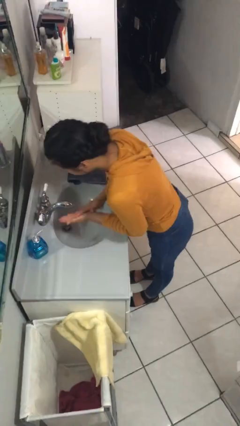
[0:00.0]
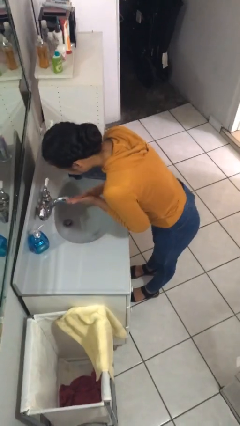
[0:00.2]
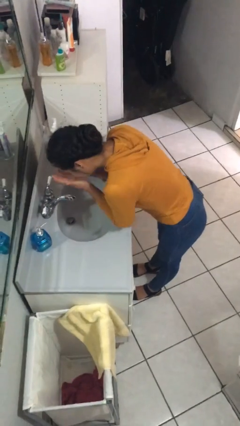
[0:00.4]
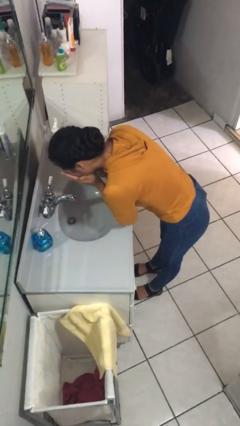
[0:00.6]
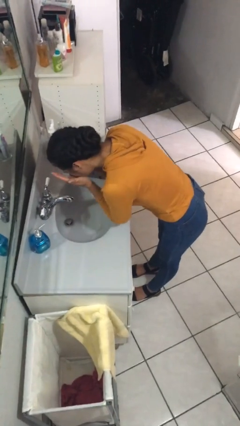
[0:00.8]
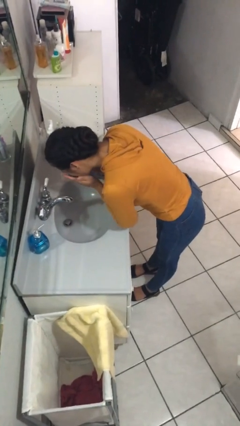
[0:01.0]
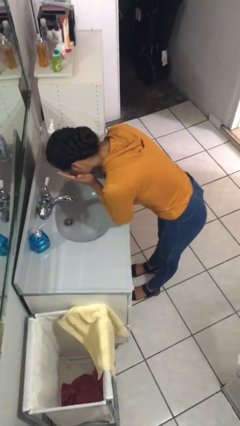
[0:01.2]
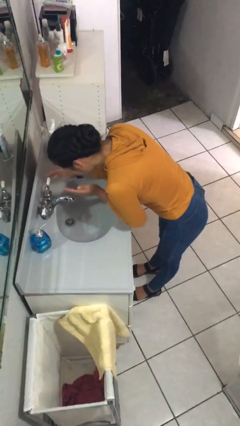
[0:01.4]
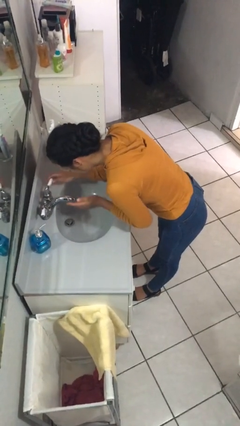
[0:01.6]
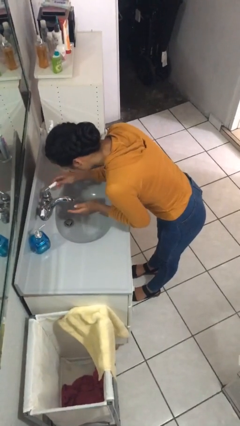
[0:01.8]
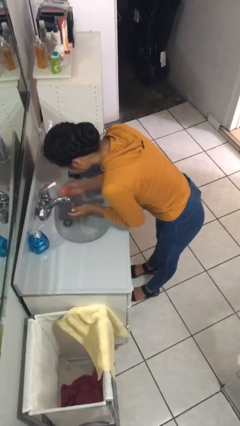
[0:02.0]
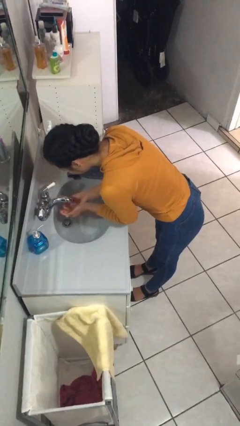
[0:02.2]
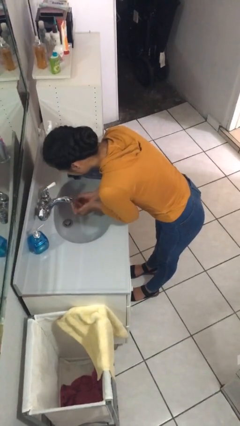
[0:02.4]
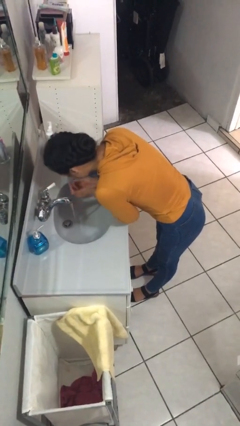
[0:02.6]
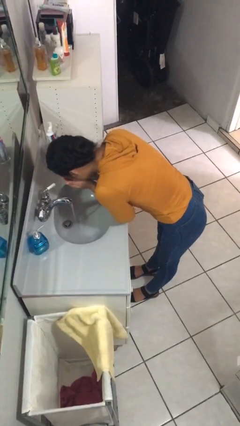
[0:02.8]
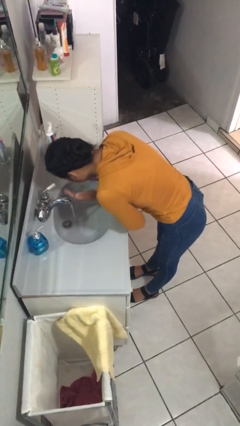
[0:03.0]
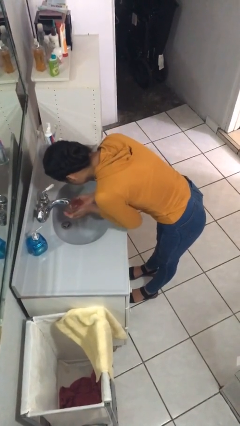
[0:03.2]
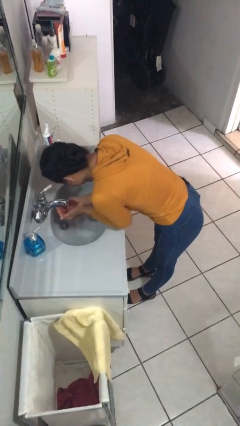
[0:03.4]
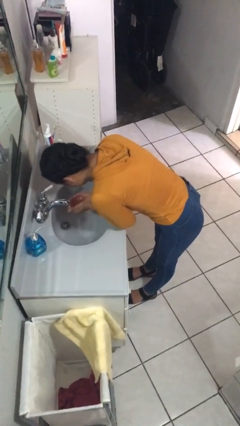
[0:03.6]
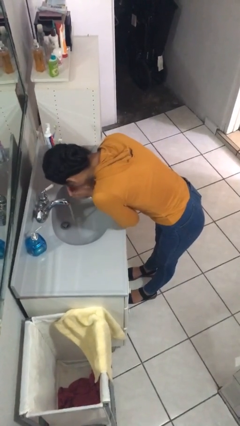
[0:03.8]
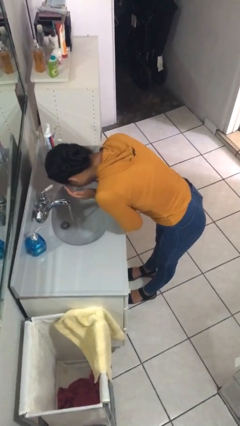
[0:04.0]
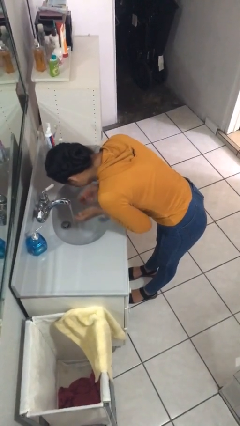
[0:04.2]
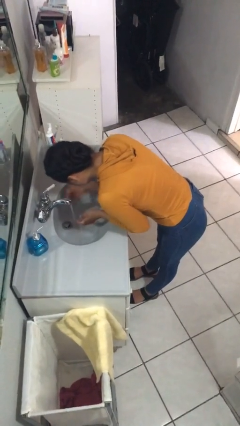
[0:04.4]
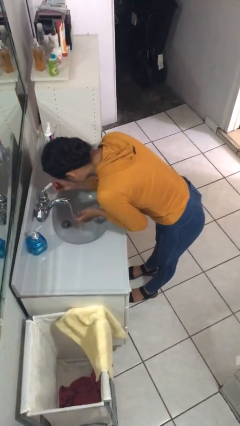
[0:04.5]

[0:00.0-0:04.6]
person washes face

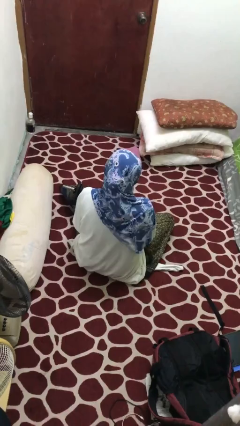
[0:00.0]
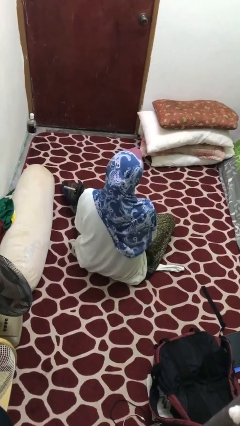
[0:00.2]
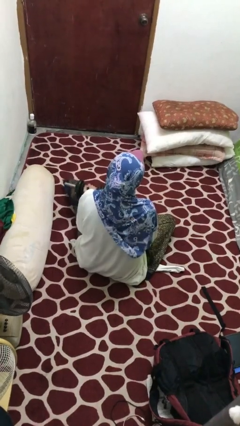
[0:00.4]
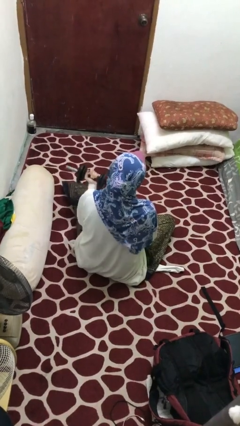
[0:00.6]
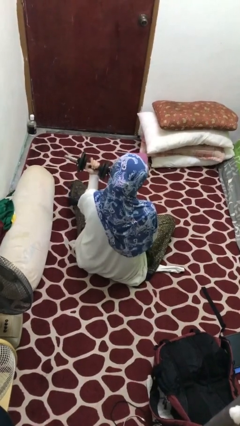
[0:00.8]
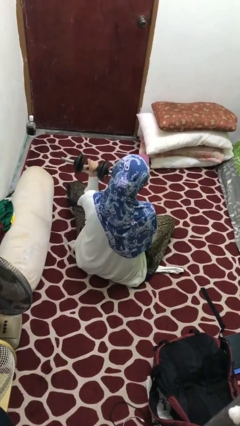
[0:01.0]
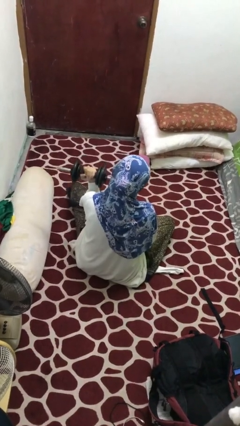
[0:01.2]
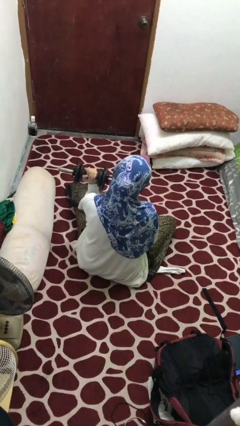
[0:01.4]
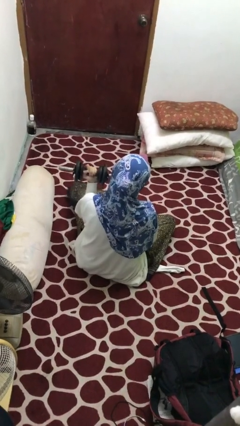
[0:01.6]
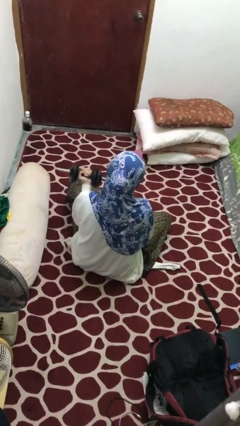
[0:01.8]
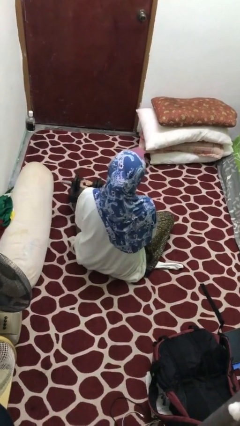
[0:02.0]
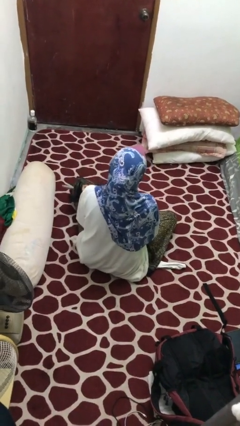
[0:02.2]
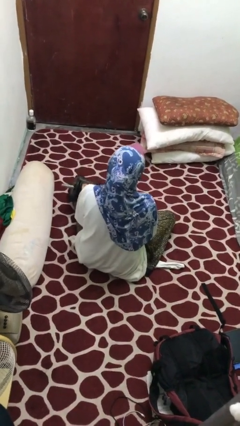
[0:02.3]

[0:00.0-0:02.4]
person lifts dumbbells

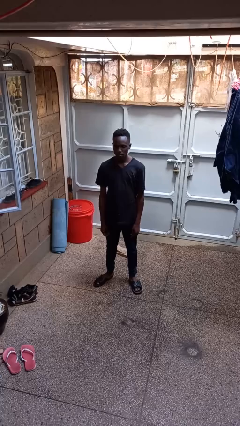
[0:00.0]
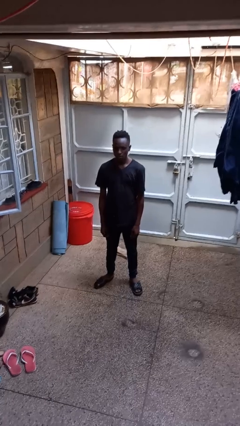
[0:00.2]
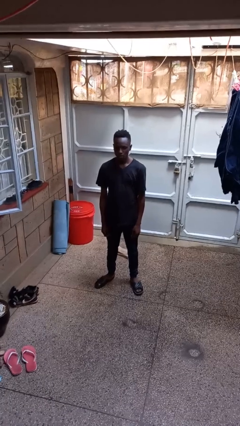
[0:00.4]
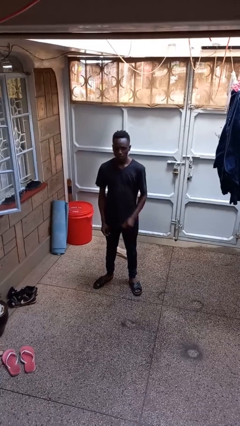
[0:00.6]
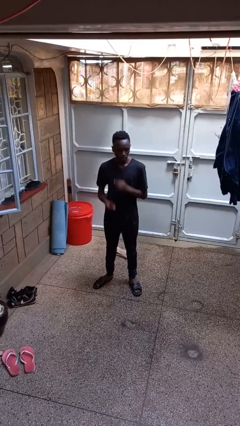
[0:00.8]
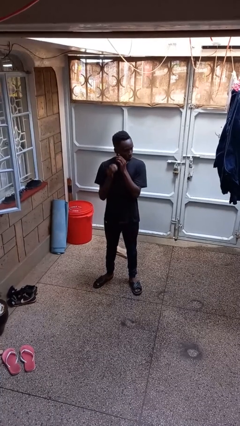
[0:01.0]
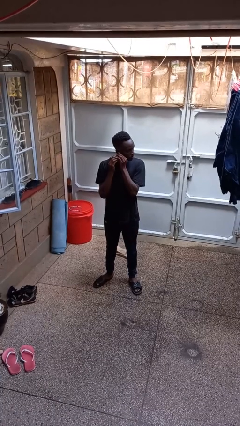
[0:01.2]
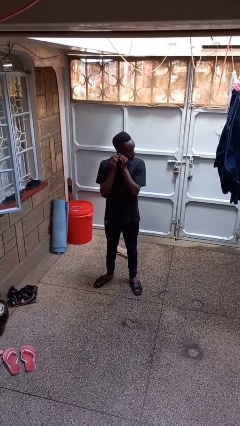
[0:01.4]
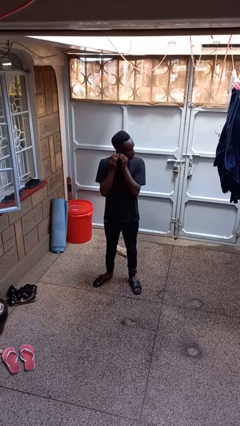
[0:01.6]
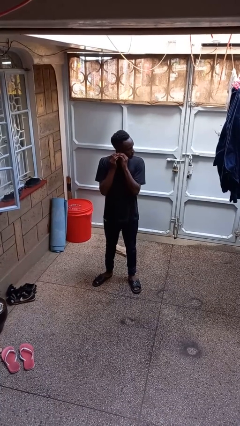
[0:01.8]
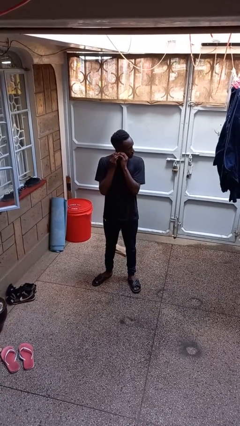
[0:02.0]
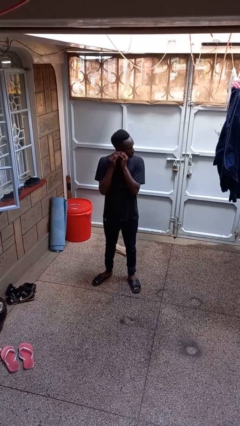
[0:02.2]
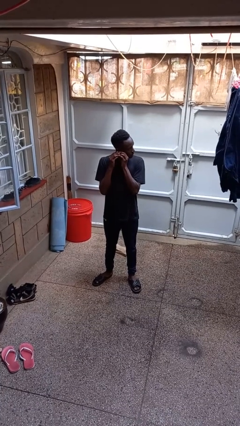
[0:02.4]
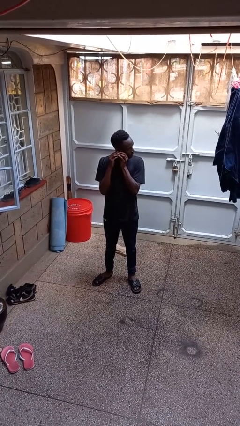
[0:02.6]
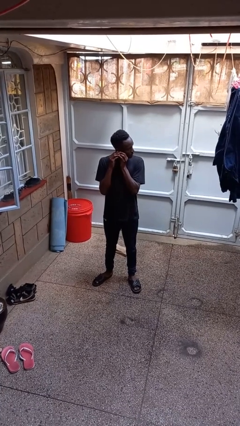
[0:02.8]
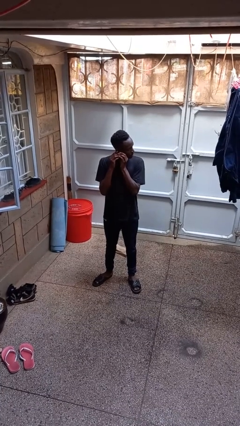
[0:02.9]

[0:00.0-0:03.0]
person puts on earrings

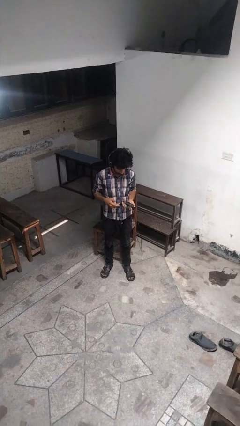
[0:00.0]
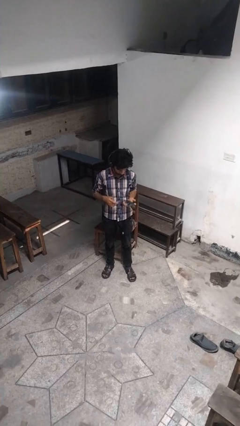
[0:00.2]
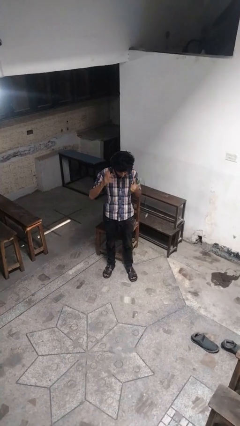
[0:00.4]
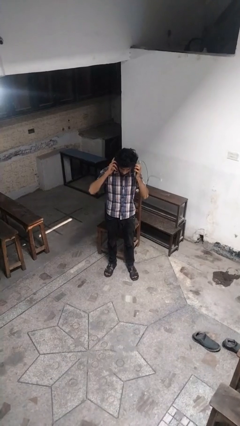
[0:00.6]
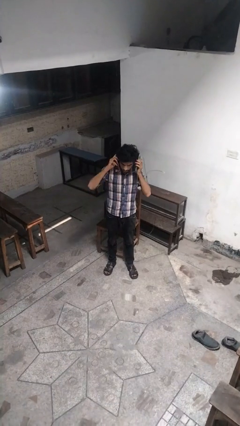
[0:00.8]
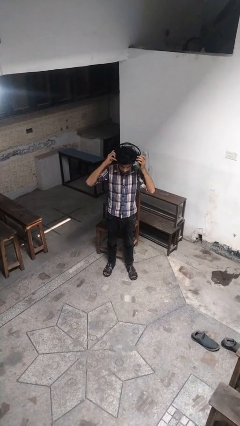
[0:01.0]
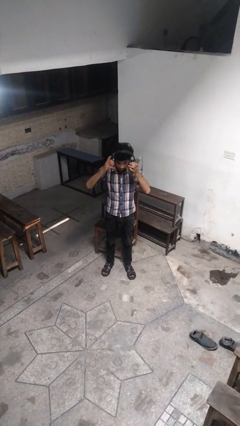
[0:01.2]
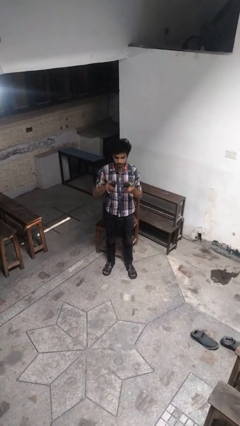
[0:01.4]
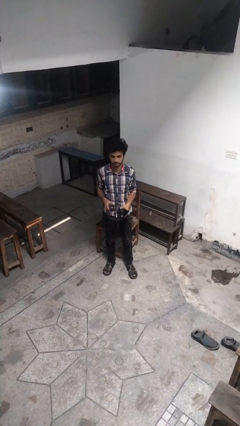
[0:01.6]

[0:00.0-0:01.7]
person takes off headphones

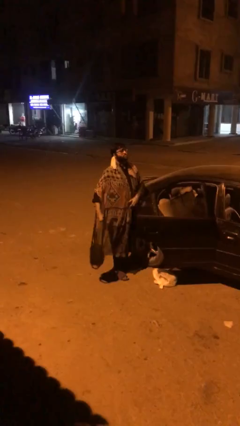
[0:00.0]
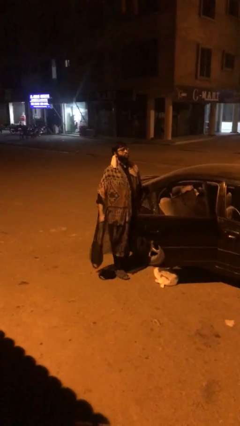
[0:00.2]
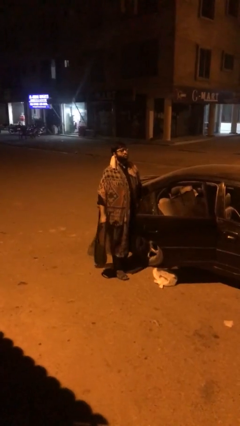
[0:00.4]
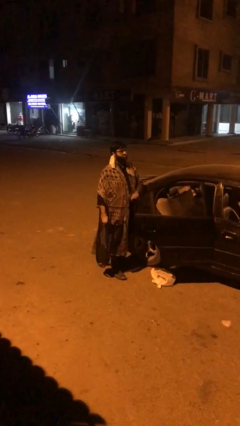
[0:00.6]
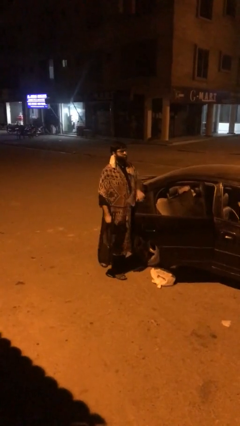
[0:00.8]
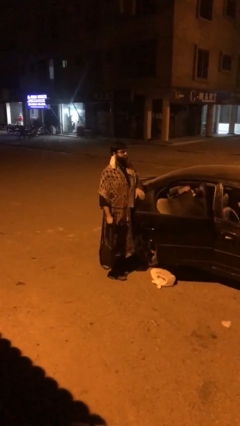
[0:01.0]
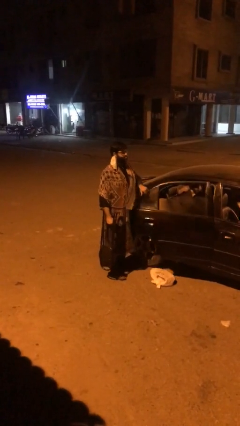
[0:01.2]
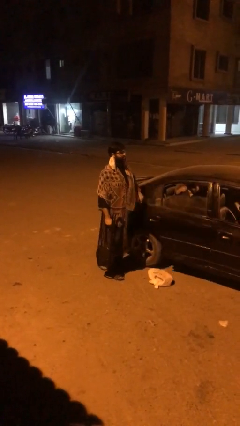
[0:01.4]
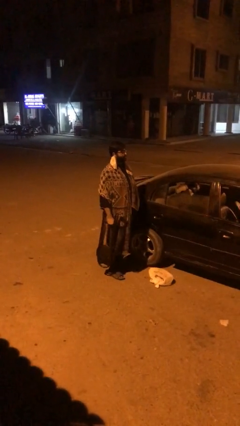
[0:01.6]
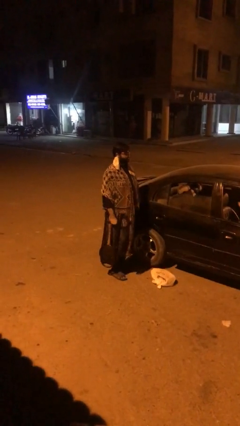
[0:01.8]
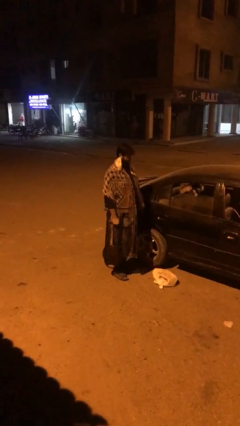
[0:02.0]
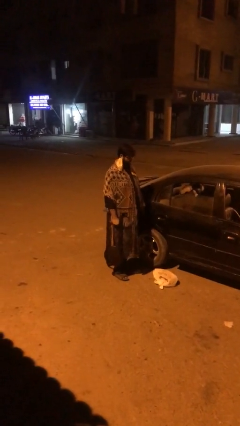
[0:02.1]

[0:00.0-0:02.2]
person closes car door

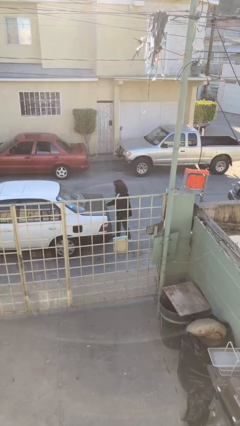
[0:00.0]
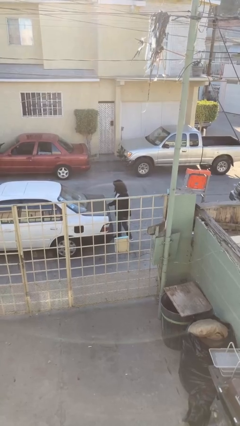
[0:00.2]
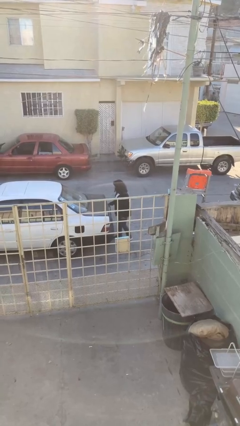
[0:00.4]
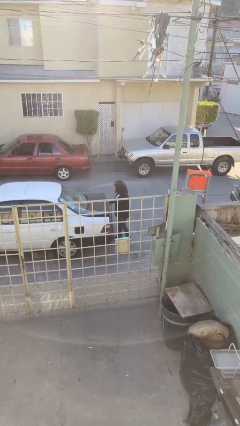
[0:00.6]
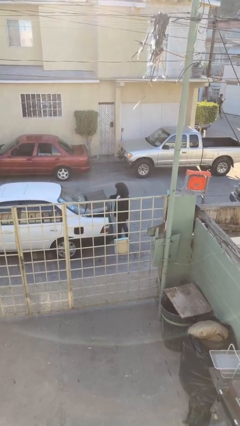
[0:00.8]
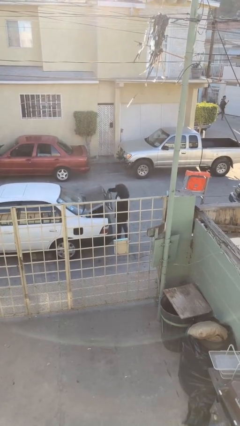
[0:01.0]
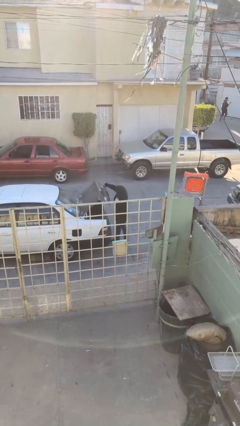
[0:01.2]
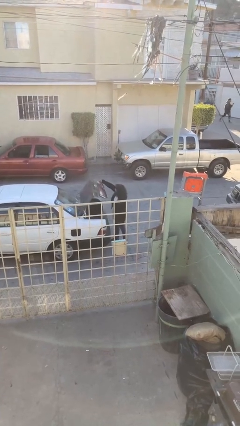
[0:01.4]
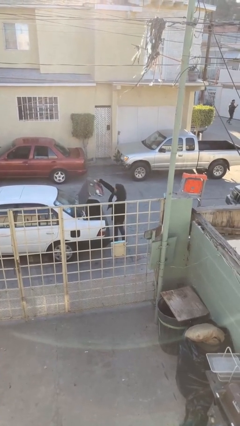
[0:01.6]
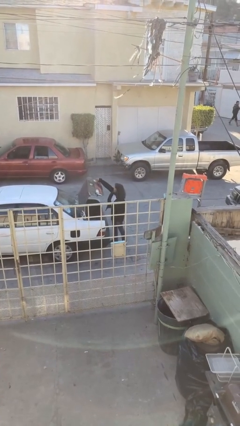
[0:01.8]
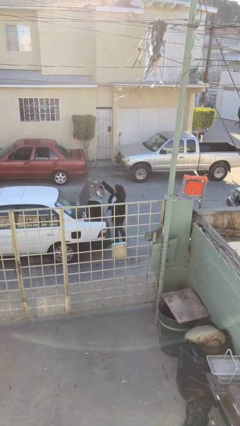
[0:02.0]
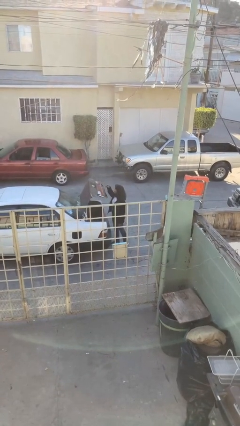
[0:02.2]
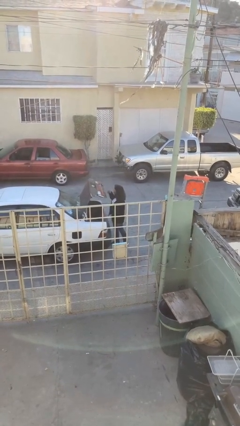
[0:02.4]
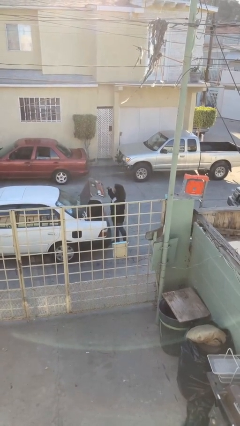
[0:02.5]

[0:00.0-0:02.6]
person opens car trunk

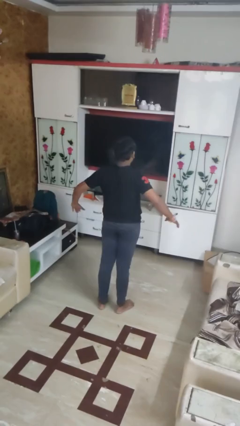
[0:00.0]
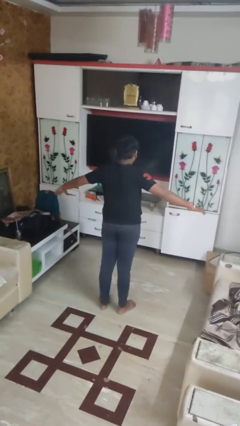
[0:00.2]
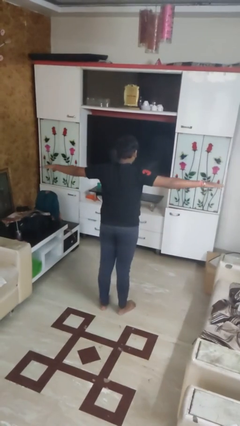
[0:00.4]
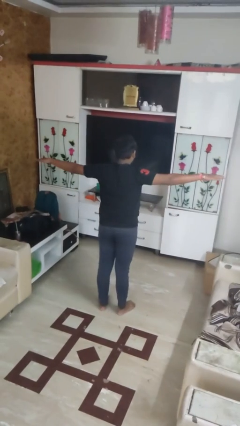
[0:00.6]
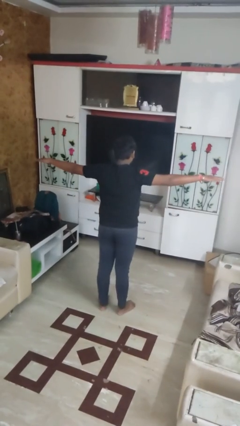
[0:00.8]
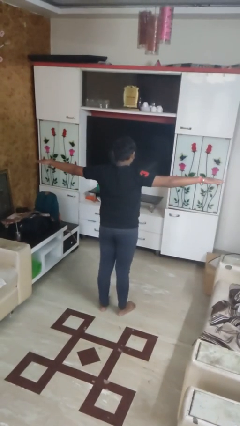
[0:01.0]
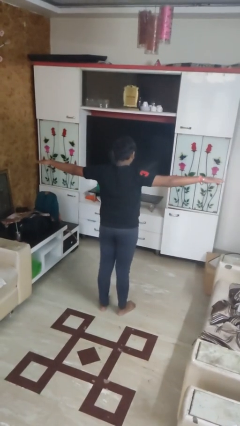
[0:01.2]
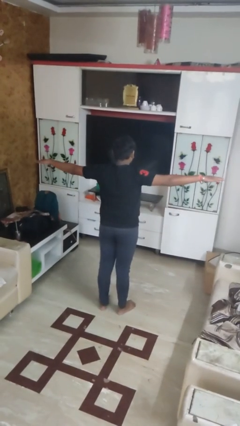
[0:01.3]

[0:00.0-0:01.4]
person stretches arms to side
